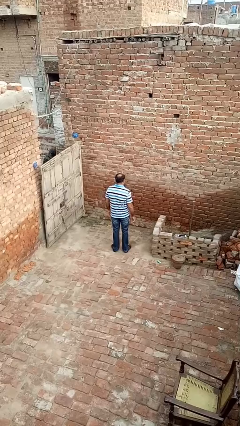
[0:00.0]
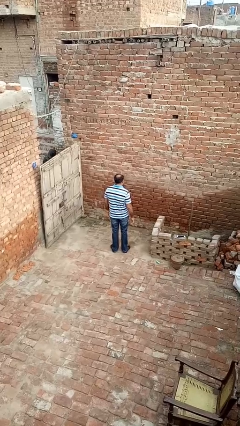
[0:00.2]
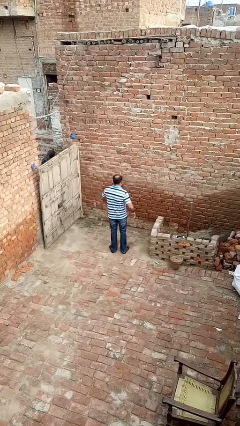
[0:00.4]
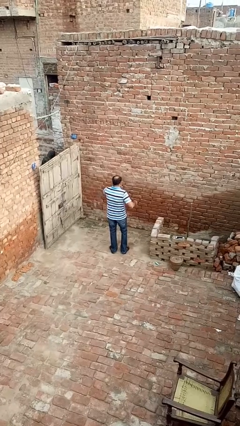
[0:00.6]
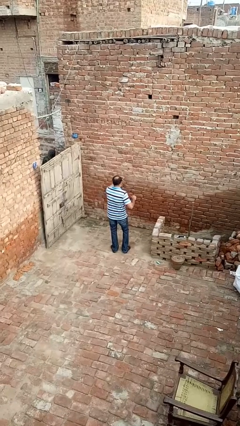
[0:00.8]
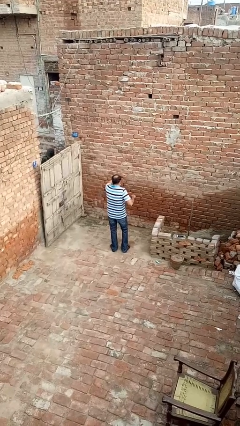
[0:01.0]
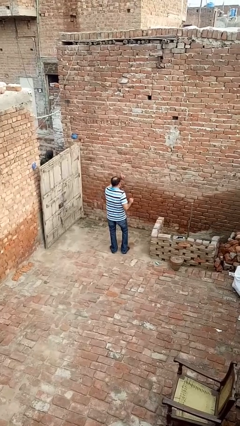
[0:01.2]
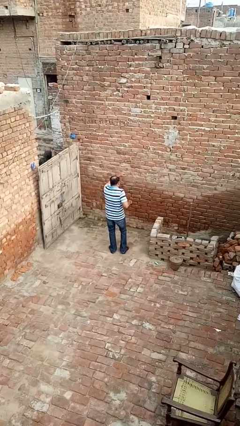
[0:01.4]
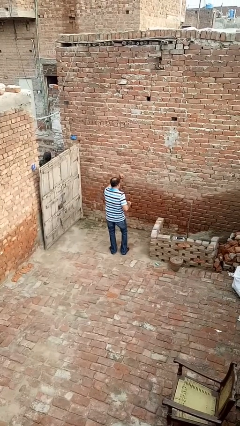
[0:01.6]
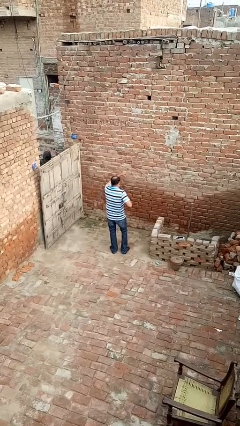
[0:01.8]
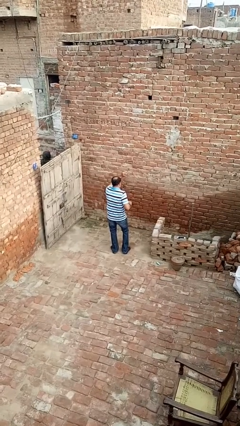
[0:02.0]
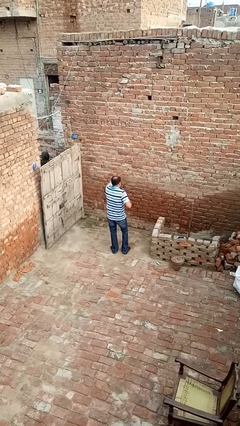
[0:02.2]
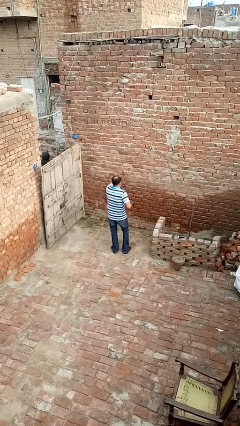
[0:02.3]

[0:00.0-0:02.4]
person dances in place

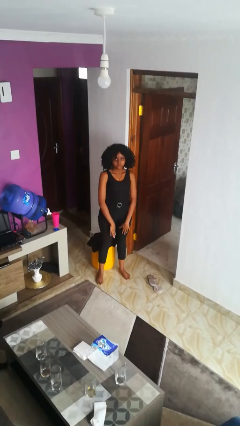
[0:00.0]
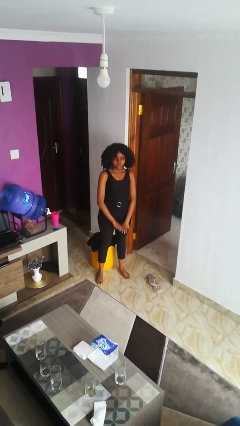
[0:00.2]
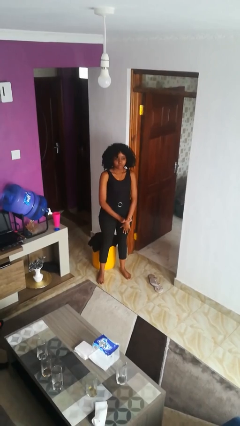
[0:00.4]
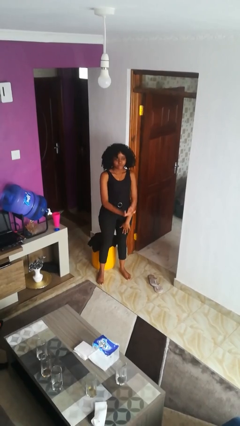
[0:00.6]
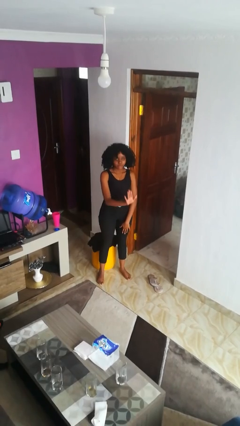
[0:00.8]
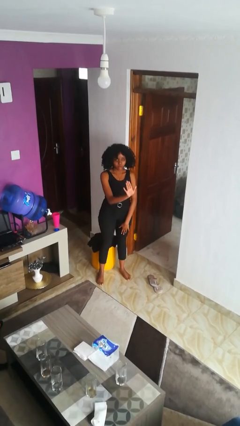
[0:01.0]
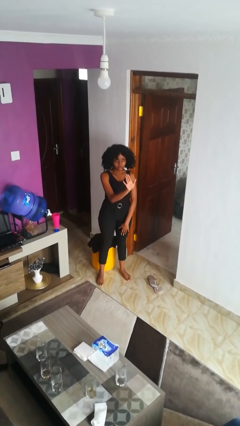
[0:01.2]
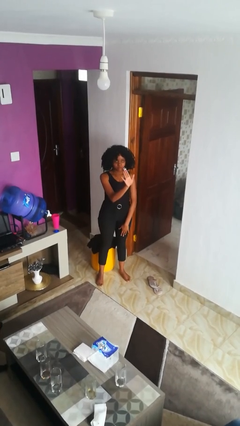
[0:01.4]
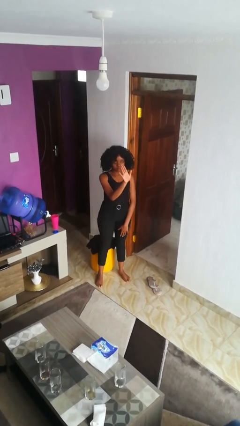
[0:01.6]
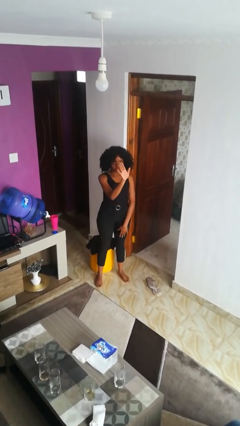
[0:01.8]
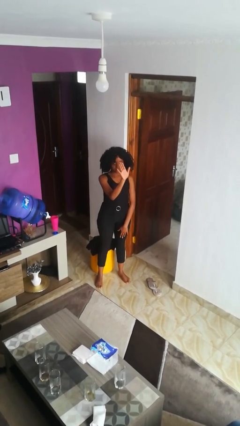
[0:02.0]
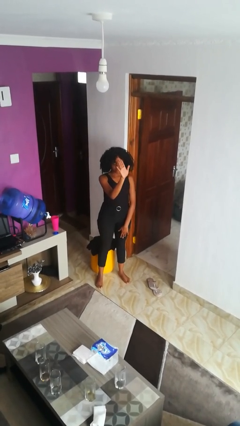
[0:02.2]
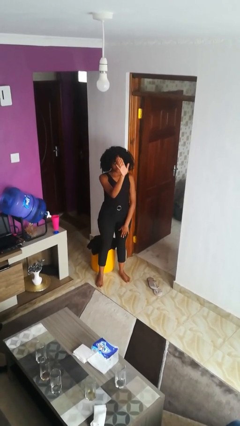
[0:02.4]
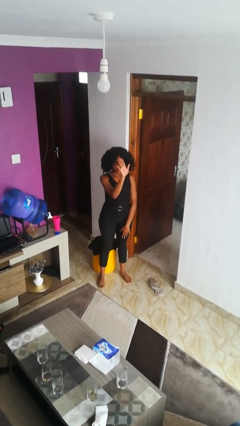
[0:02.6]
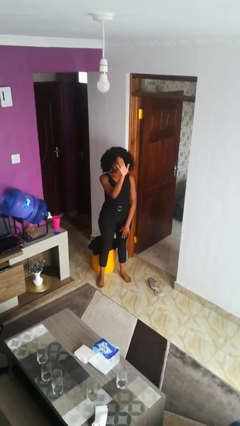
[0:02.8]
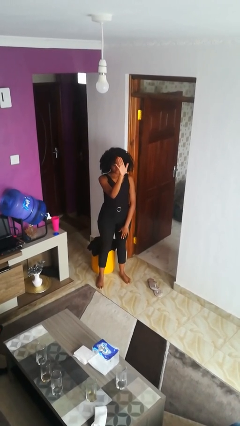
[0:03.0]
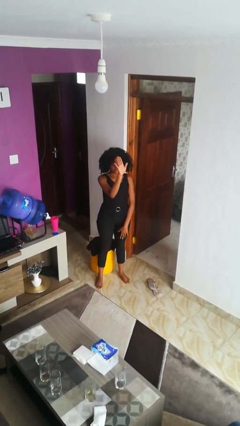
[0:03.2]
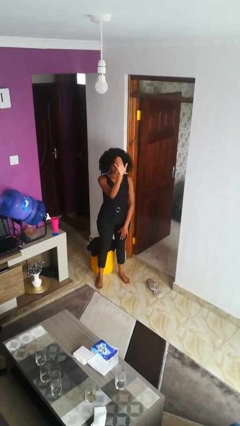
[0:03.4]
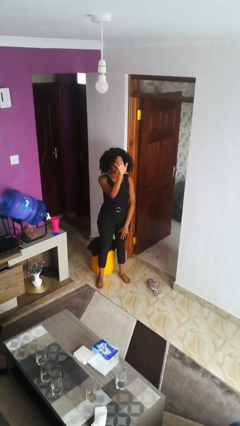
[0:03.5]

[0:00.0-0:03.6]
person gestures swipe up

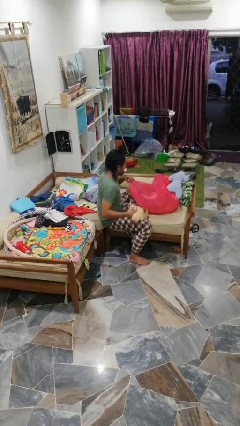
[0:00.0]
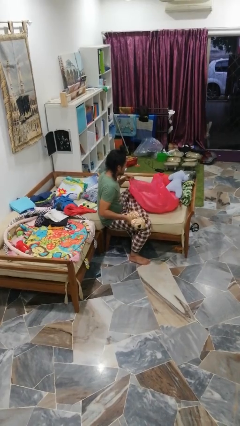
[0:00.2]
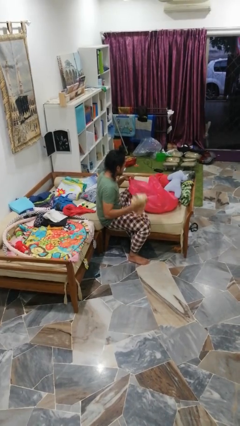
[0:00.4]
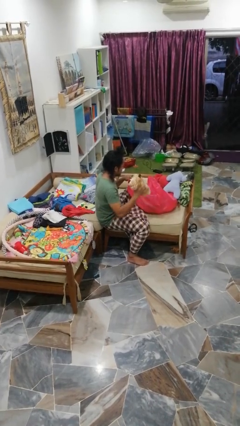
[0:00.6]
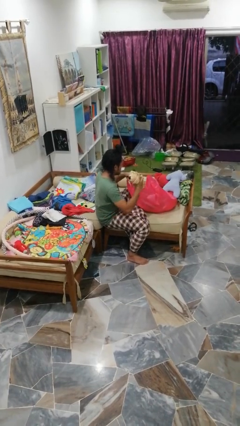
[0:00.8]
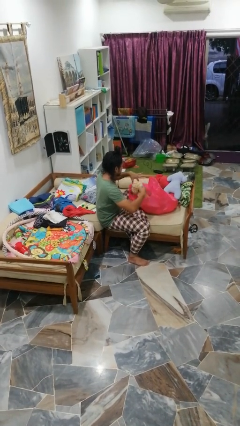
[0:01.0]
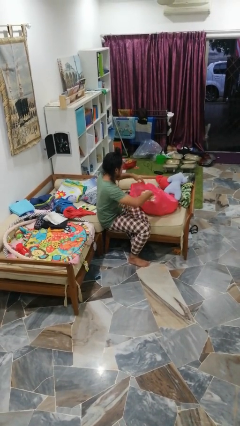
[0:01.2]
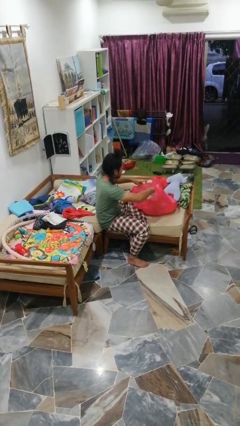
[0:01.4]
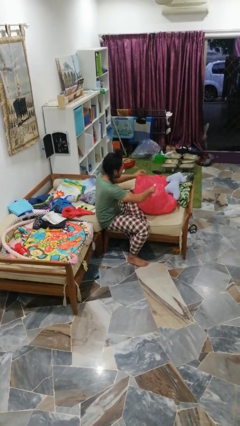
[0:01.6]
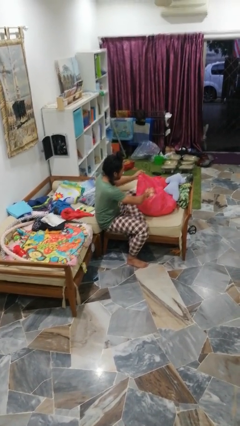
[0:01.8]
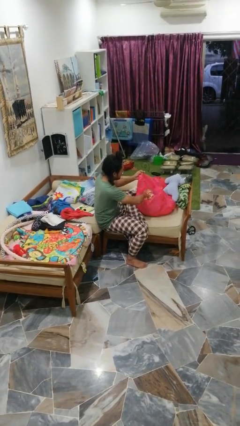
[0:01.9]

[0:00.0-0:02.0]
person puts object into bag

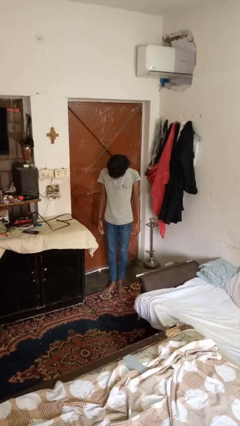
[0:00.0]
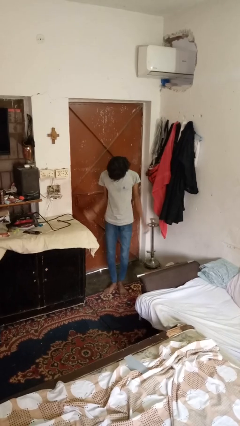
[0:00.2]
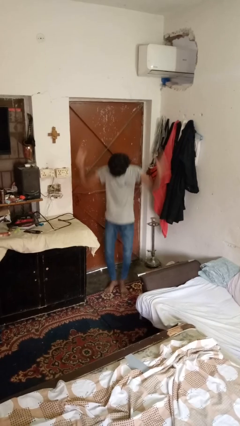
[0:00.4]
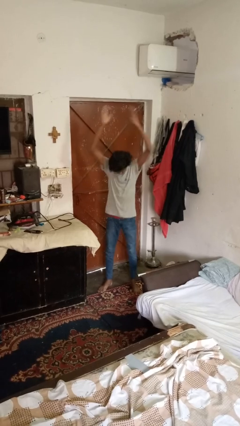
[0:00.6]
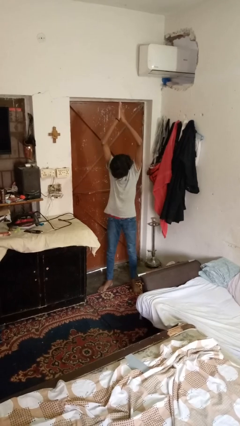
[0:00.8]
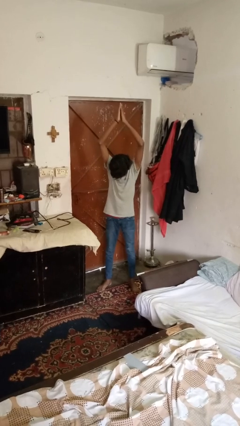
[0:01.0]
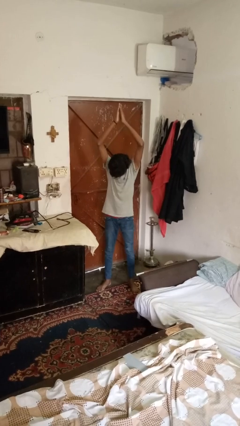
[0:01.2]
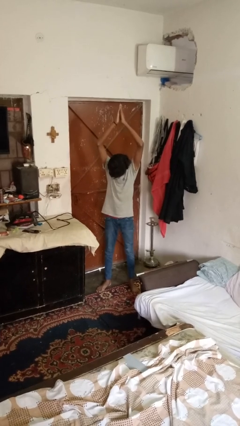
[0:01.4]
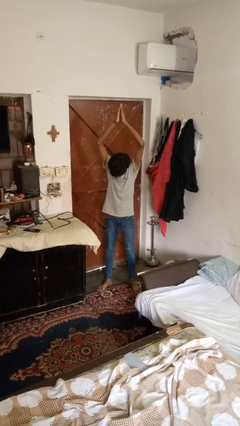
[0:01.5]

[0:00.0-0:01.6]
person exercises with jumping jacks

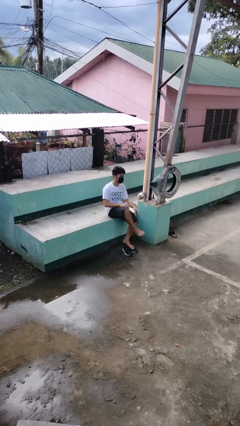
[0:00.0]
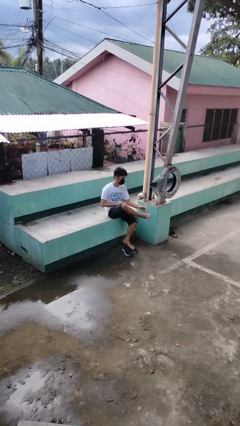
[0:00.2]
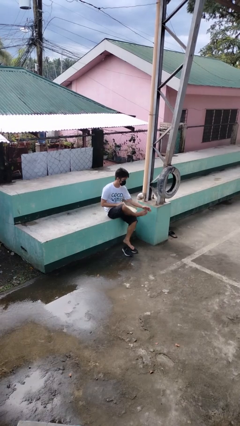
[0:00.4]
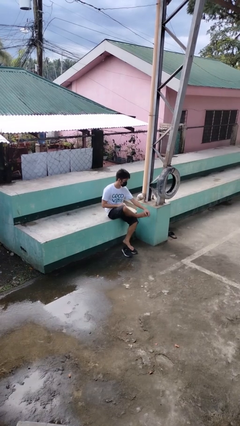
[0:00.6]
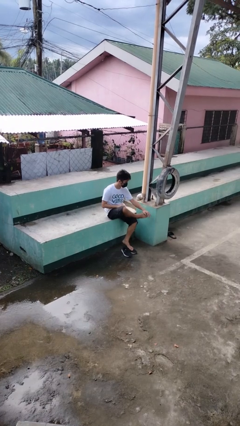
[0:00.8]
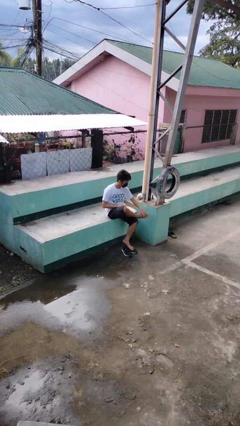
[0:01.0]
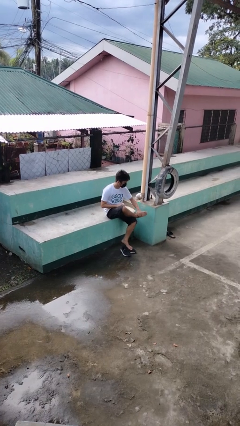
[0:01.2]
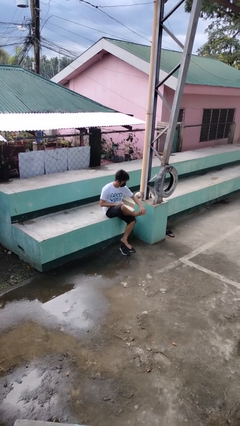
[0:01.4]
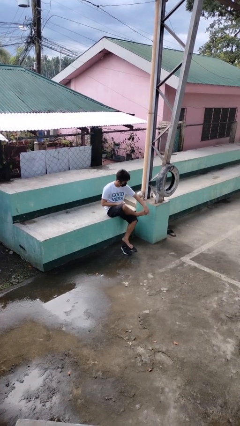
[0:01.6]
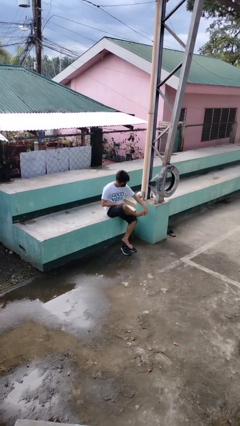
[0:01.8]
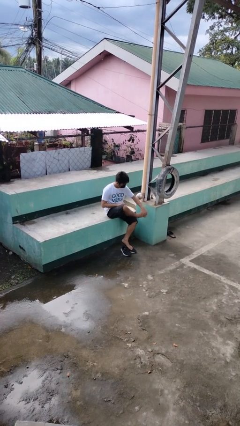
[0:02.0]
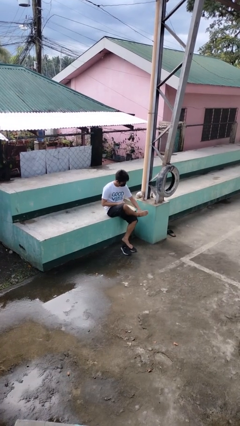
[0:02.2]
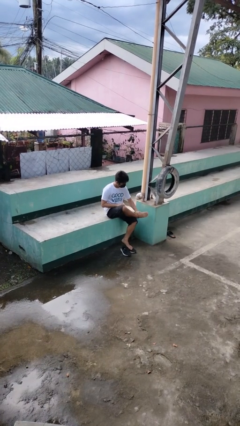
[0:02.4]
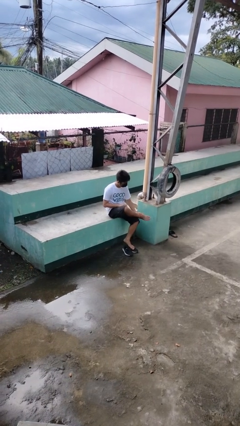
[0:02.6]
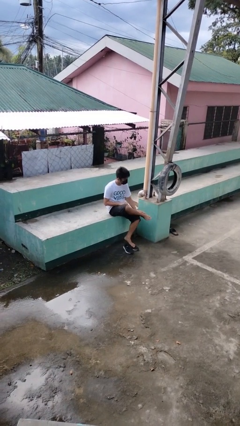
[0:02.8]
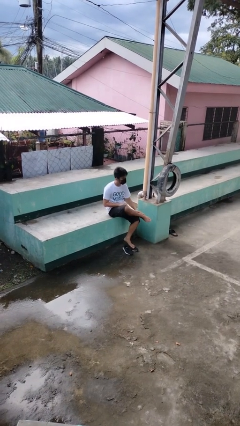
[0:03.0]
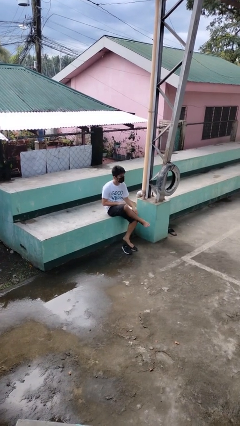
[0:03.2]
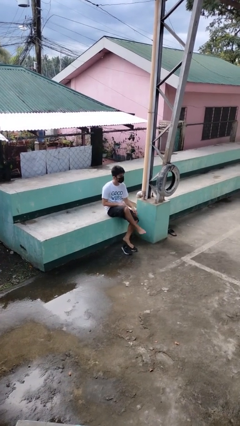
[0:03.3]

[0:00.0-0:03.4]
person rubs foot

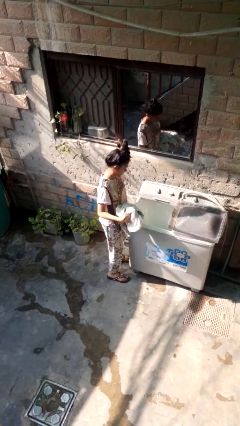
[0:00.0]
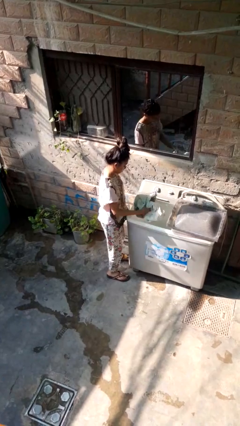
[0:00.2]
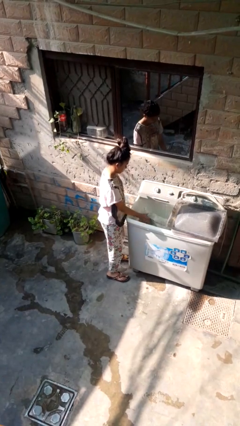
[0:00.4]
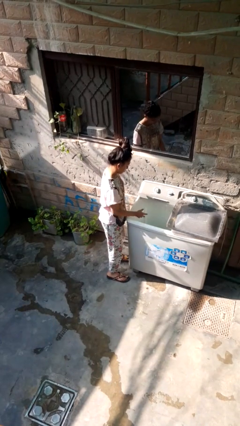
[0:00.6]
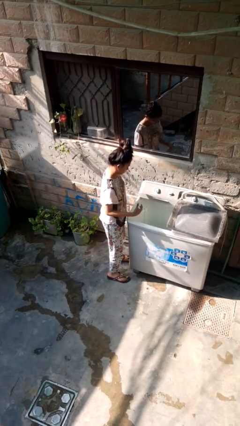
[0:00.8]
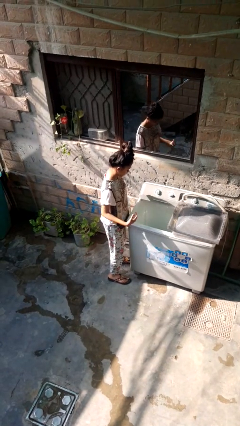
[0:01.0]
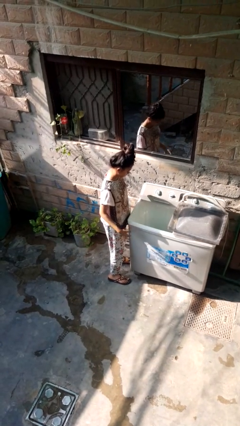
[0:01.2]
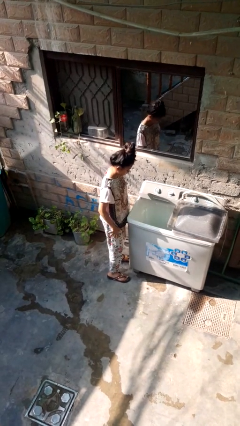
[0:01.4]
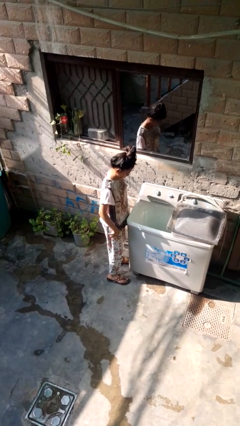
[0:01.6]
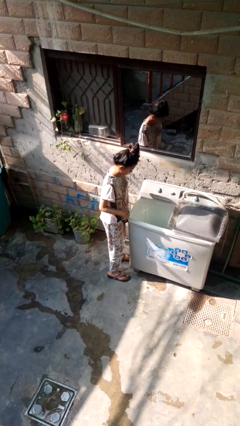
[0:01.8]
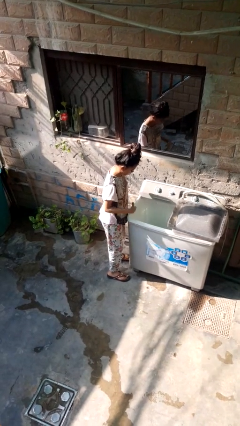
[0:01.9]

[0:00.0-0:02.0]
person loads clotheswasher

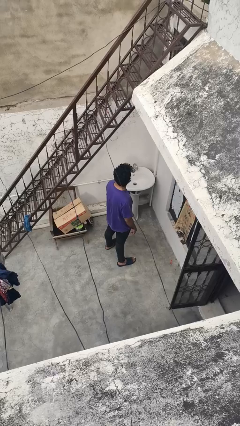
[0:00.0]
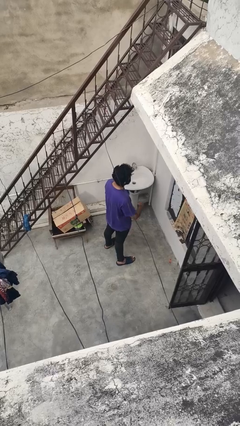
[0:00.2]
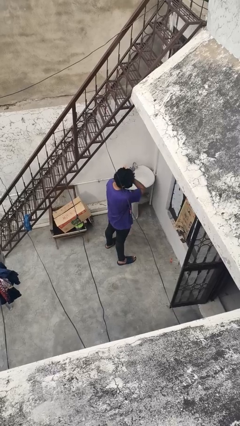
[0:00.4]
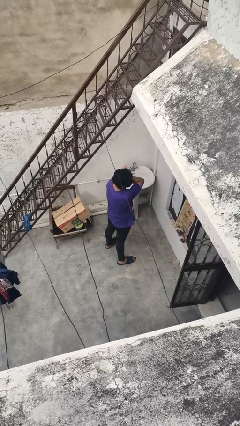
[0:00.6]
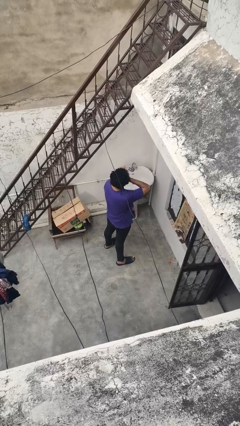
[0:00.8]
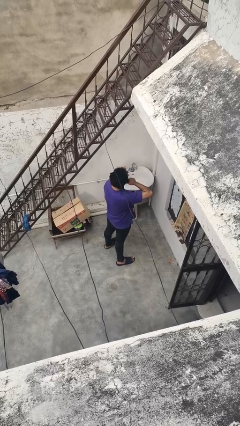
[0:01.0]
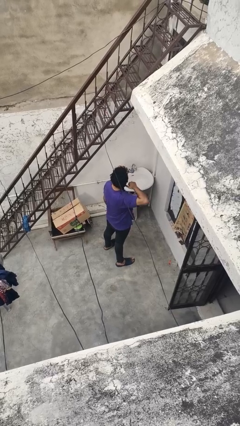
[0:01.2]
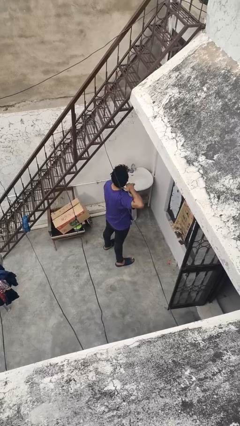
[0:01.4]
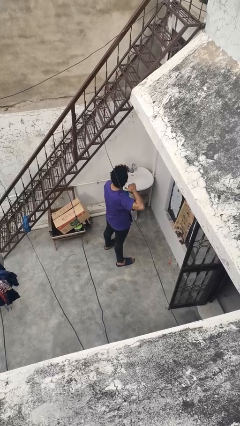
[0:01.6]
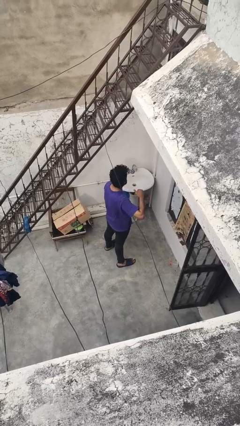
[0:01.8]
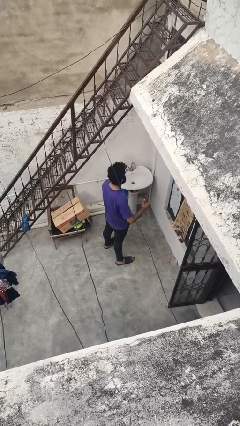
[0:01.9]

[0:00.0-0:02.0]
person gestures cut
